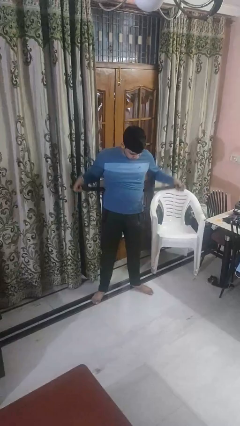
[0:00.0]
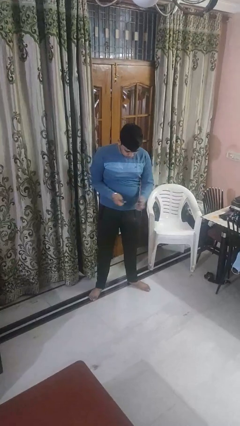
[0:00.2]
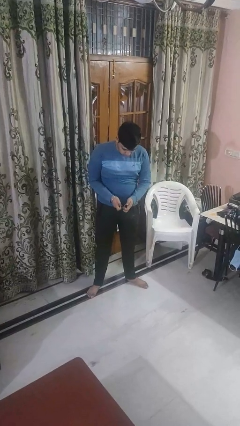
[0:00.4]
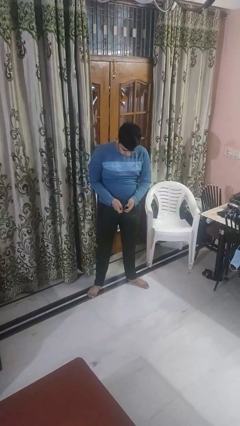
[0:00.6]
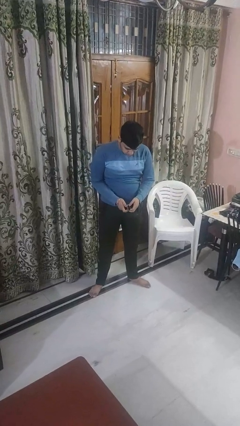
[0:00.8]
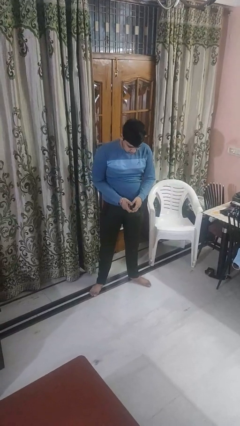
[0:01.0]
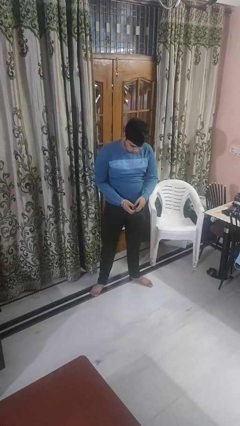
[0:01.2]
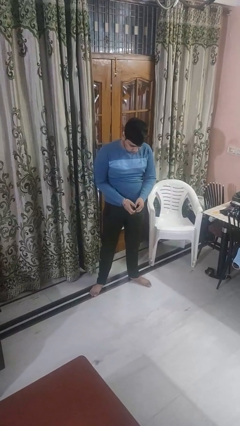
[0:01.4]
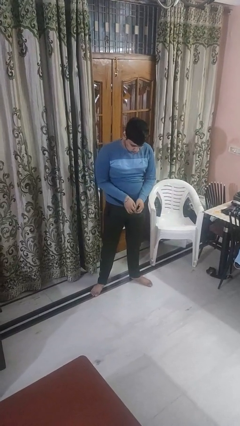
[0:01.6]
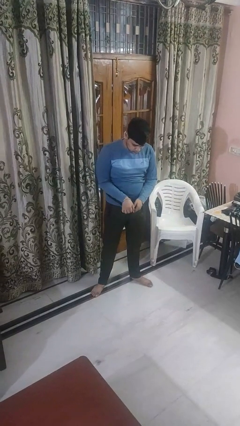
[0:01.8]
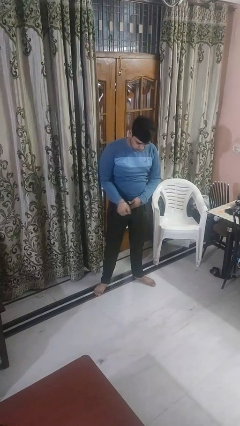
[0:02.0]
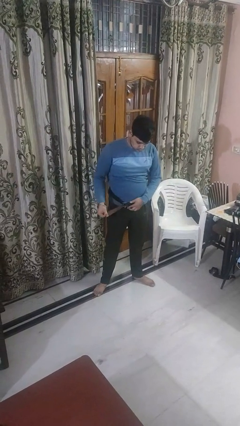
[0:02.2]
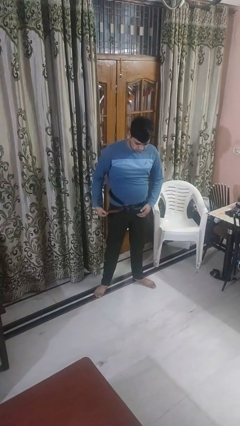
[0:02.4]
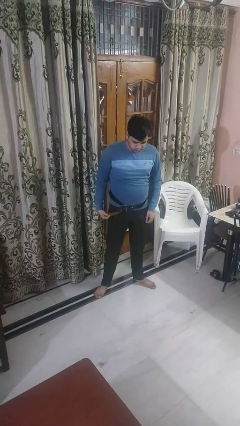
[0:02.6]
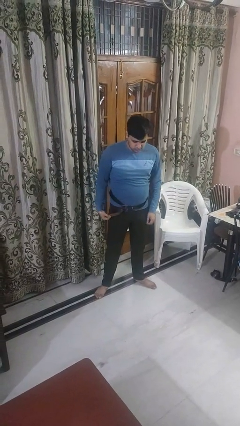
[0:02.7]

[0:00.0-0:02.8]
person puts on belt

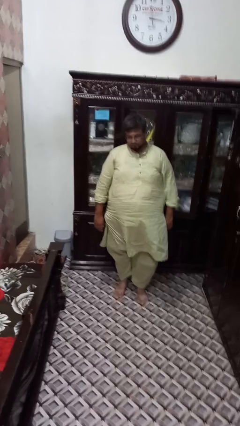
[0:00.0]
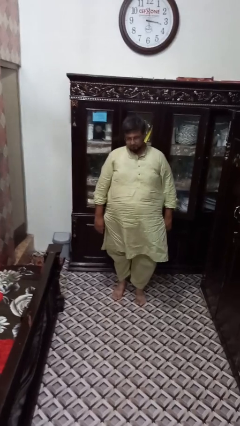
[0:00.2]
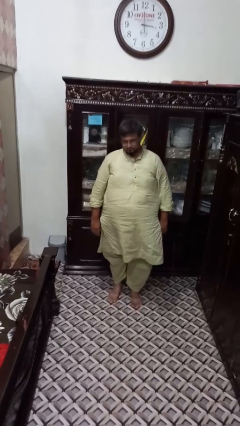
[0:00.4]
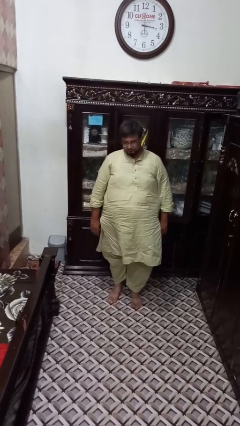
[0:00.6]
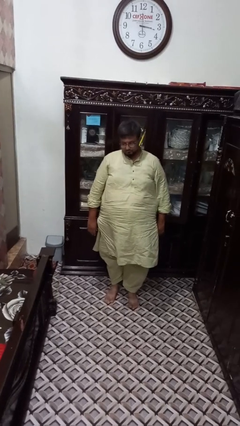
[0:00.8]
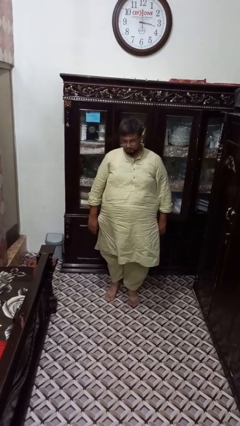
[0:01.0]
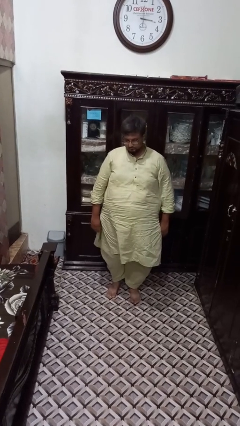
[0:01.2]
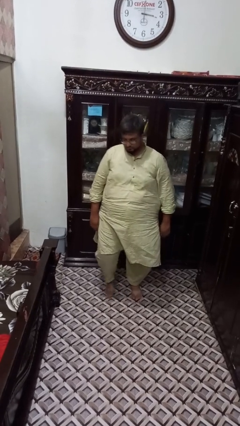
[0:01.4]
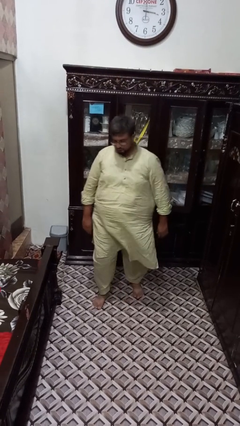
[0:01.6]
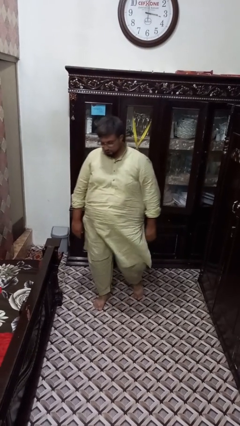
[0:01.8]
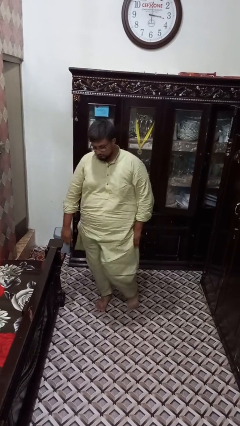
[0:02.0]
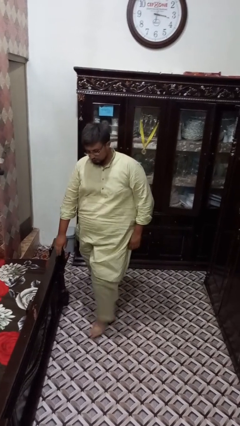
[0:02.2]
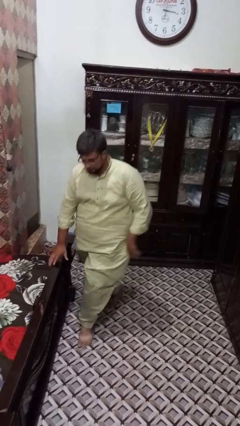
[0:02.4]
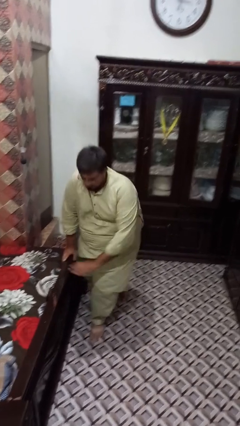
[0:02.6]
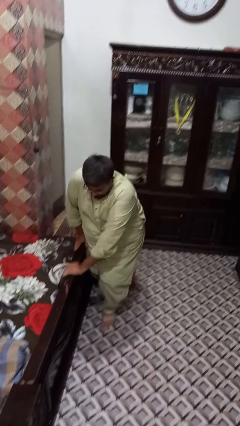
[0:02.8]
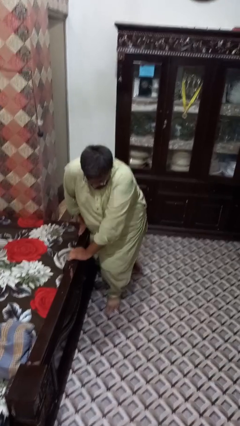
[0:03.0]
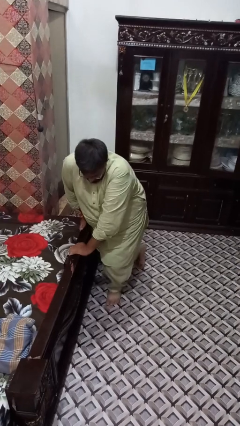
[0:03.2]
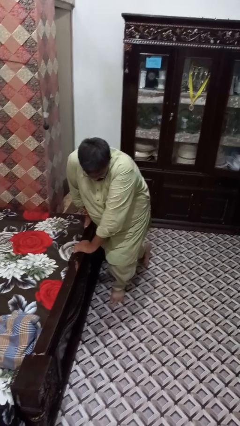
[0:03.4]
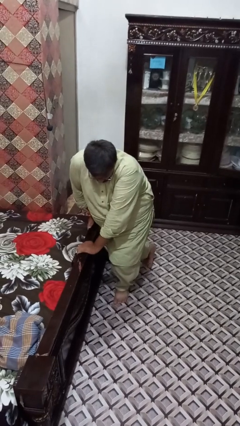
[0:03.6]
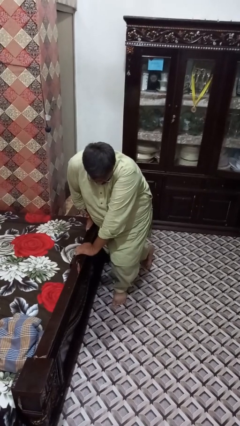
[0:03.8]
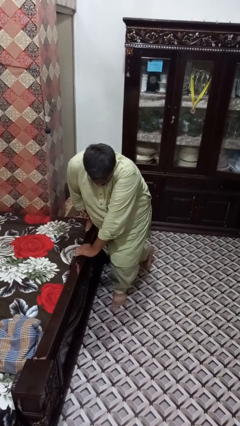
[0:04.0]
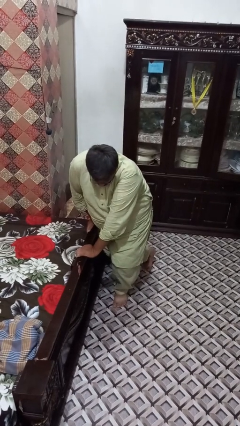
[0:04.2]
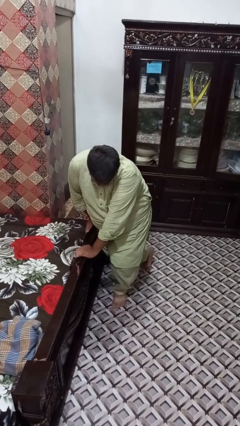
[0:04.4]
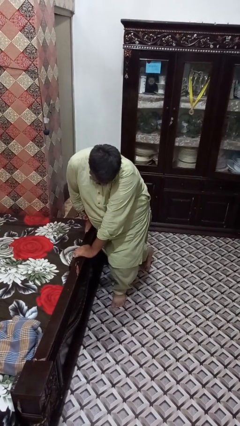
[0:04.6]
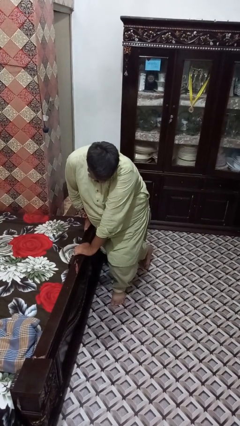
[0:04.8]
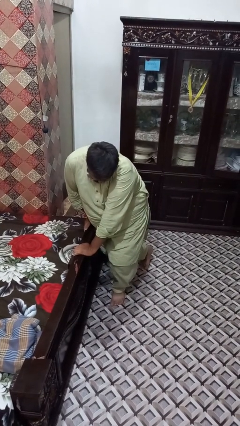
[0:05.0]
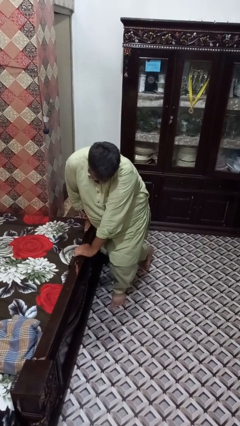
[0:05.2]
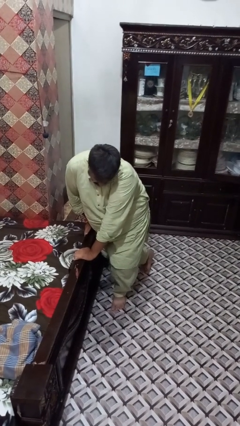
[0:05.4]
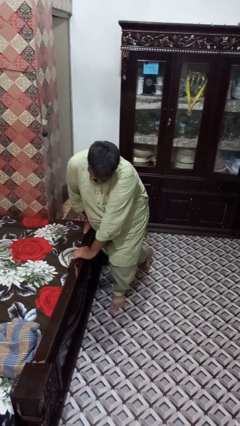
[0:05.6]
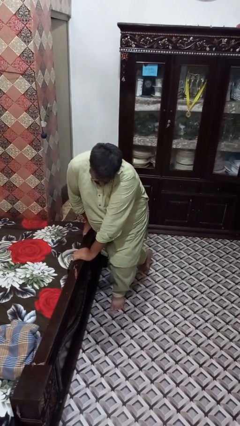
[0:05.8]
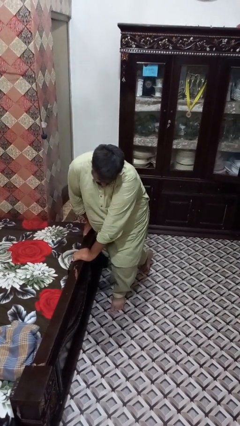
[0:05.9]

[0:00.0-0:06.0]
person trips on object on floor

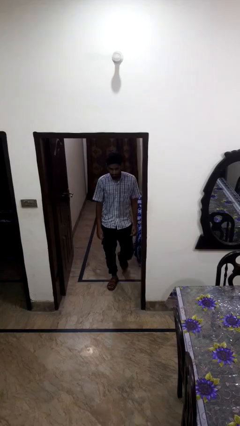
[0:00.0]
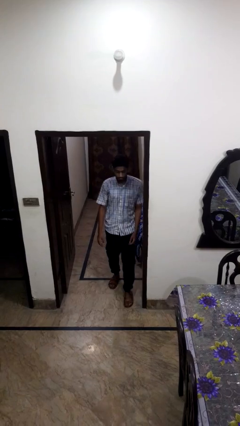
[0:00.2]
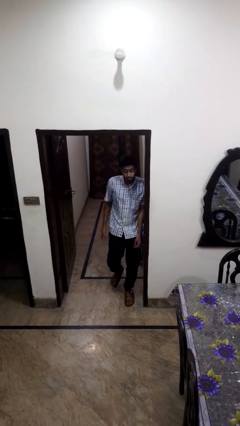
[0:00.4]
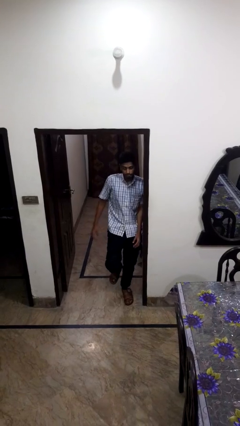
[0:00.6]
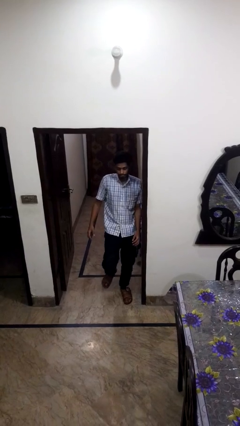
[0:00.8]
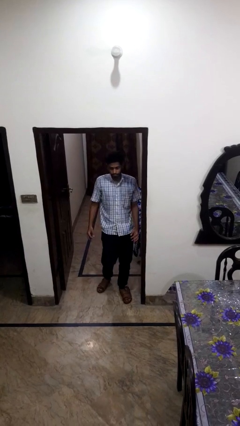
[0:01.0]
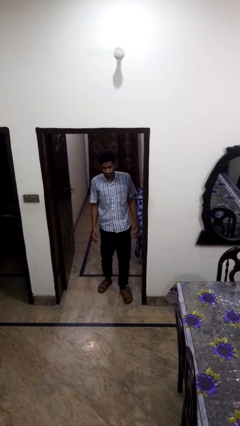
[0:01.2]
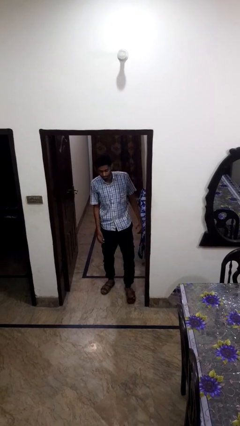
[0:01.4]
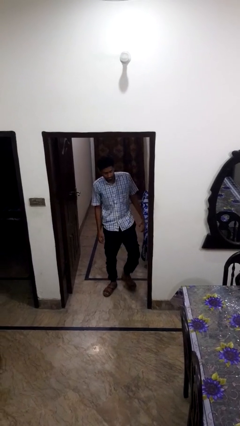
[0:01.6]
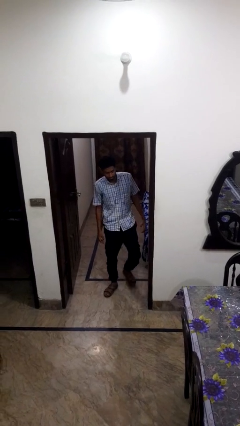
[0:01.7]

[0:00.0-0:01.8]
person bumps into wall

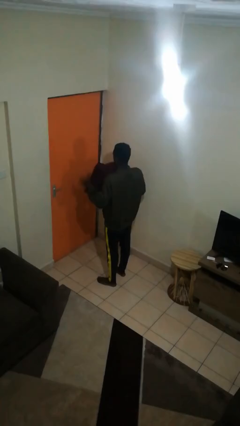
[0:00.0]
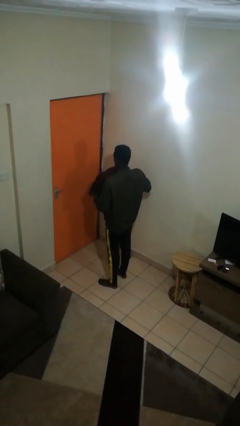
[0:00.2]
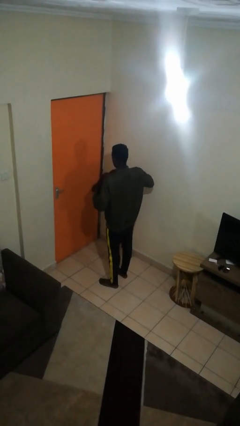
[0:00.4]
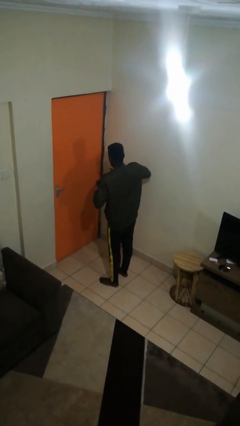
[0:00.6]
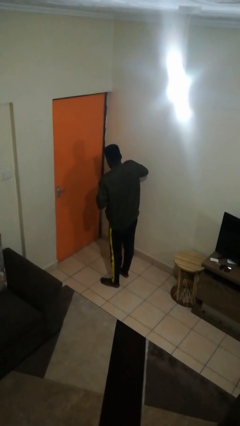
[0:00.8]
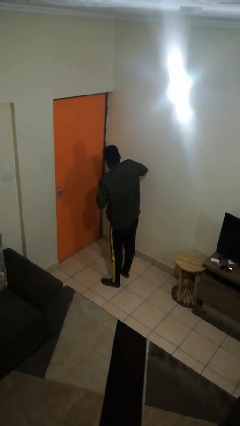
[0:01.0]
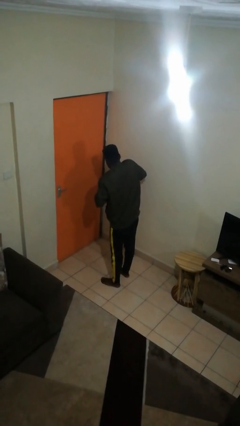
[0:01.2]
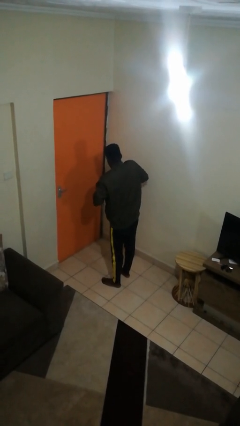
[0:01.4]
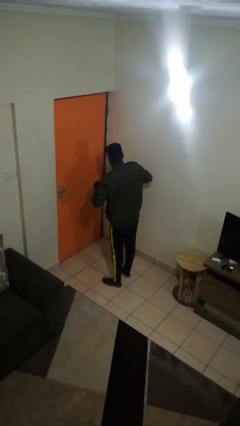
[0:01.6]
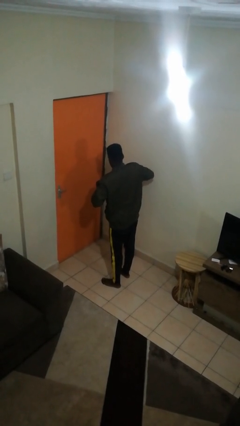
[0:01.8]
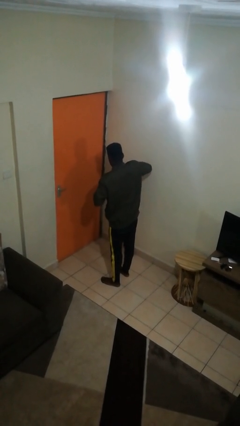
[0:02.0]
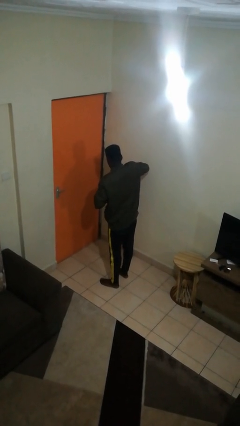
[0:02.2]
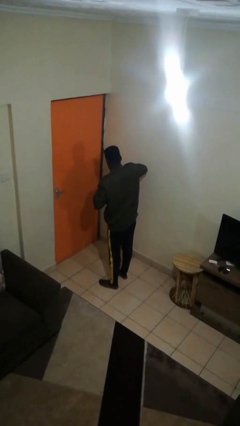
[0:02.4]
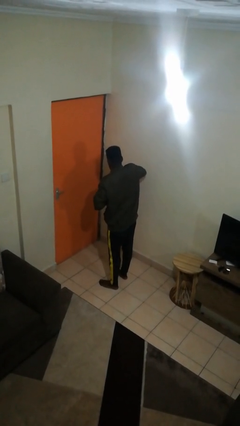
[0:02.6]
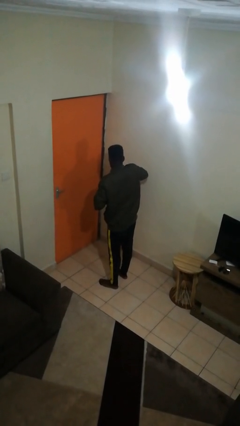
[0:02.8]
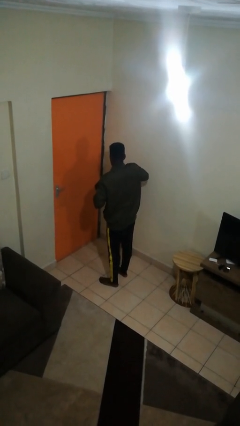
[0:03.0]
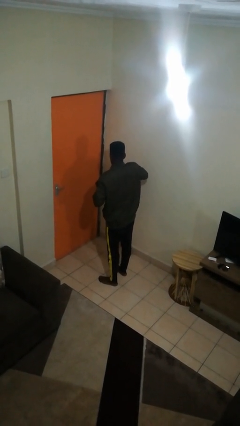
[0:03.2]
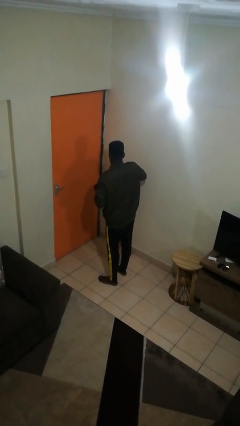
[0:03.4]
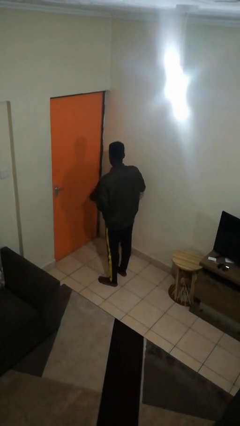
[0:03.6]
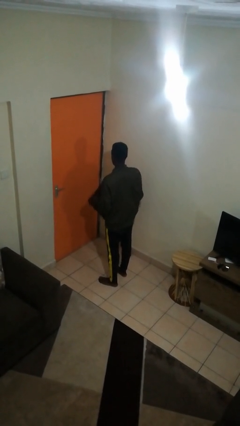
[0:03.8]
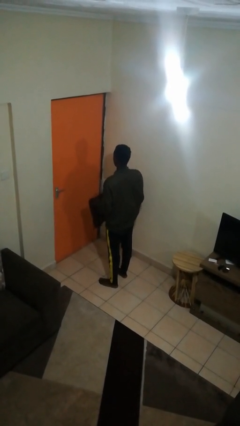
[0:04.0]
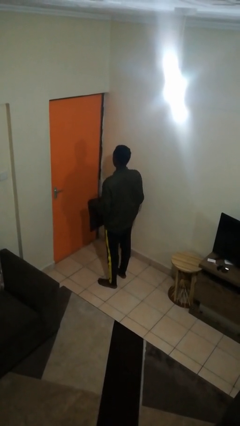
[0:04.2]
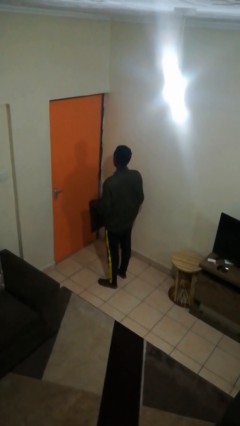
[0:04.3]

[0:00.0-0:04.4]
person squeezes object

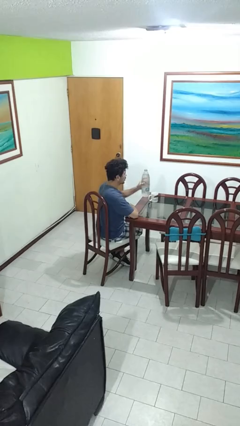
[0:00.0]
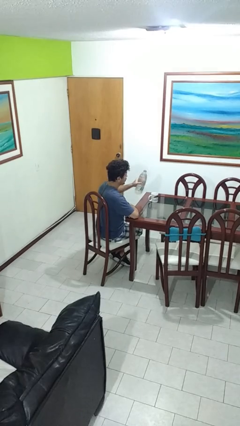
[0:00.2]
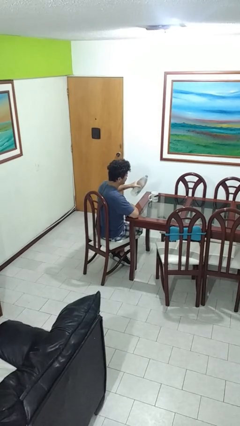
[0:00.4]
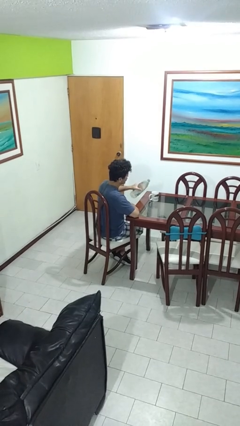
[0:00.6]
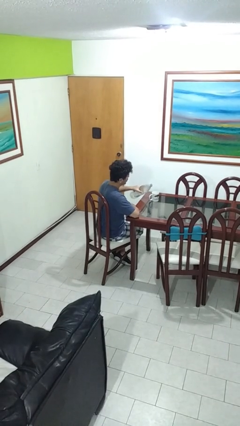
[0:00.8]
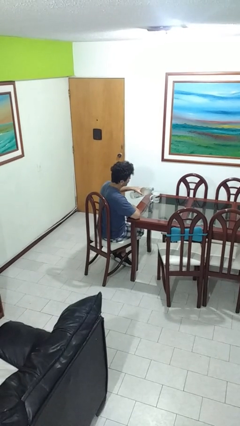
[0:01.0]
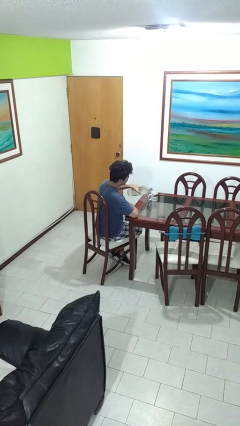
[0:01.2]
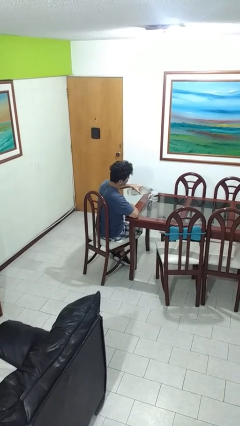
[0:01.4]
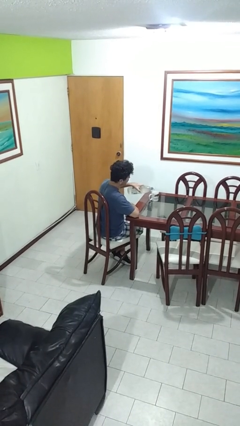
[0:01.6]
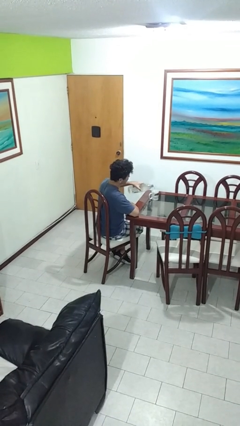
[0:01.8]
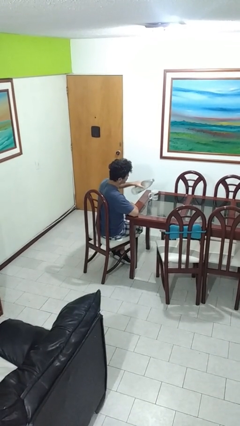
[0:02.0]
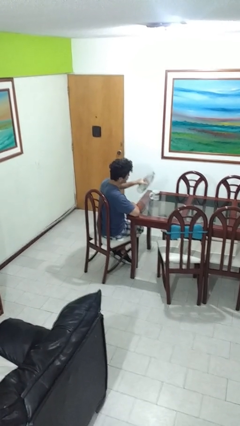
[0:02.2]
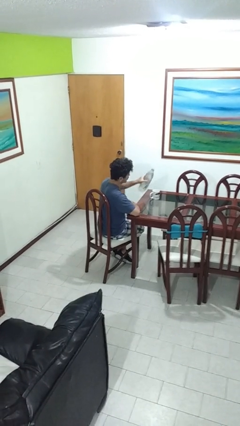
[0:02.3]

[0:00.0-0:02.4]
person pours liquid into cup
